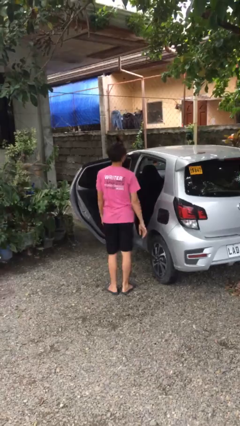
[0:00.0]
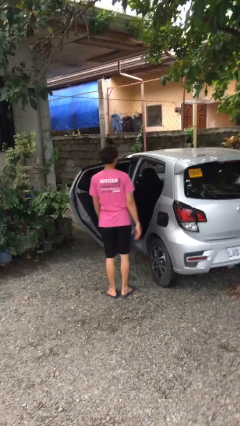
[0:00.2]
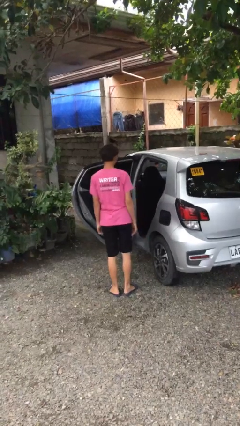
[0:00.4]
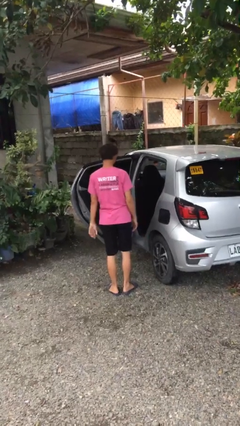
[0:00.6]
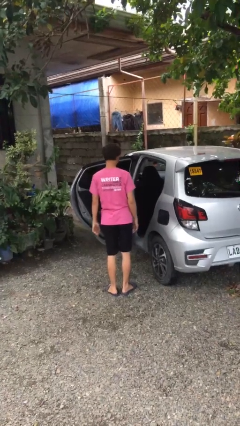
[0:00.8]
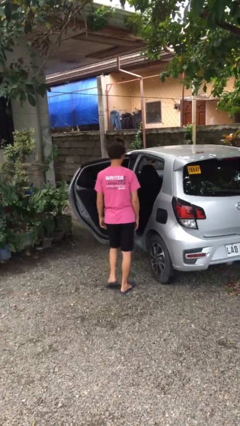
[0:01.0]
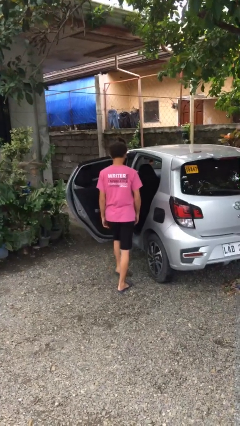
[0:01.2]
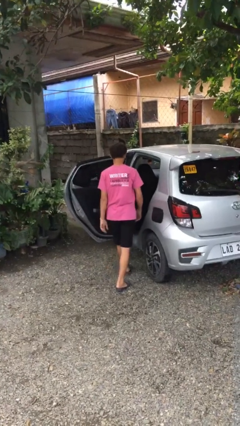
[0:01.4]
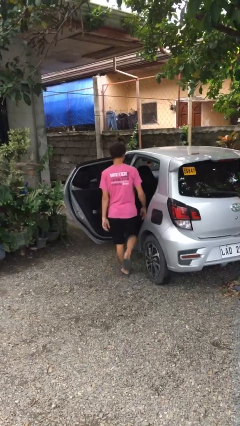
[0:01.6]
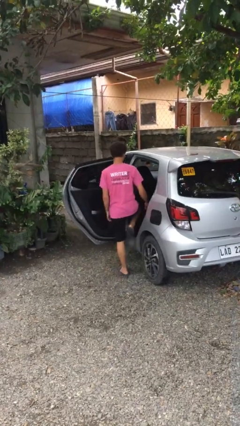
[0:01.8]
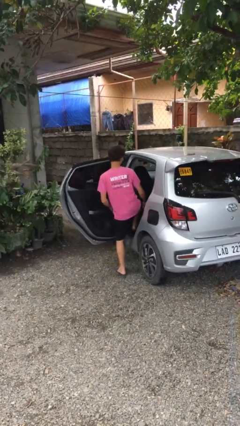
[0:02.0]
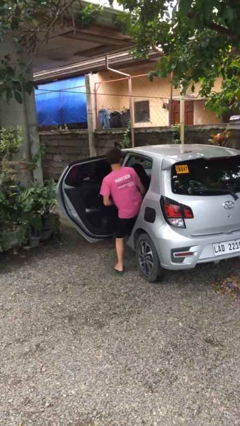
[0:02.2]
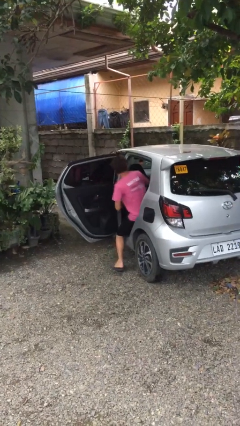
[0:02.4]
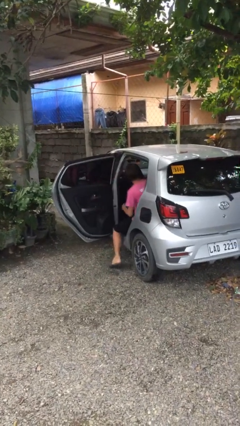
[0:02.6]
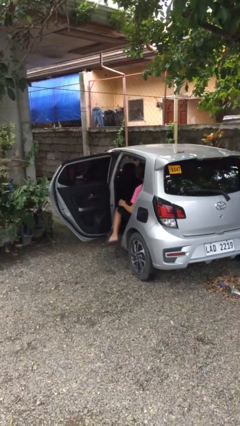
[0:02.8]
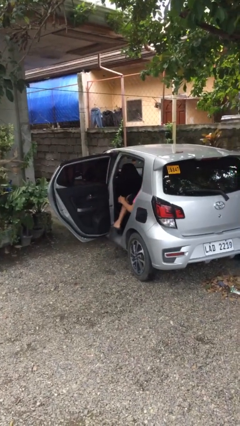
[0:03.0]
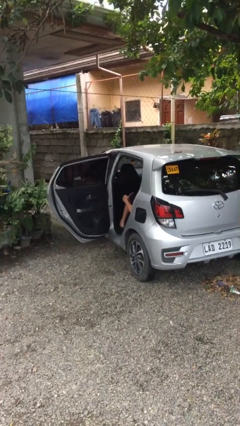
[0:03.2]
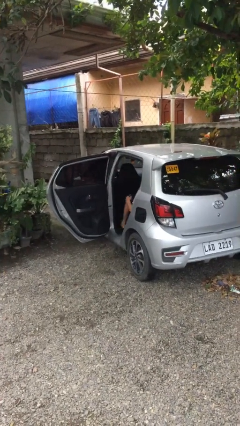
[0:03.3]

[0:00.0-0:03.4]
person enters car

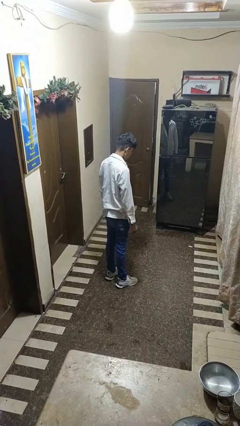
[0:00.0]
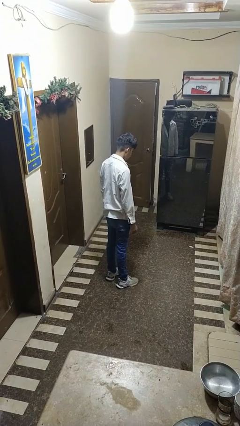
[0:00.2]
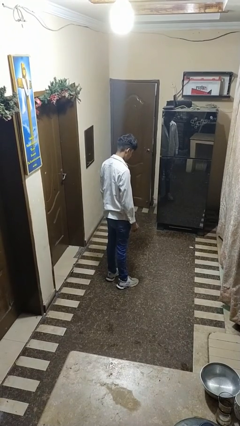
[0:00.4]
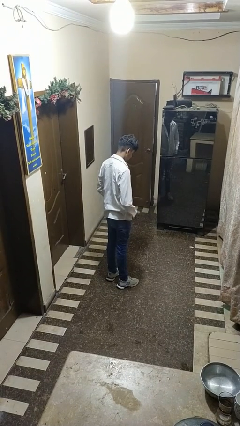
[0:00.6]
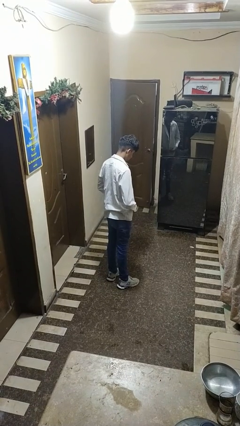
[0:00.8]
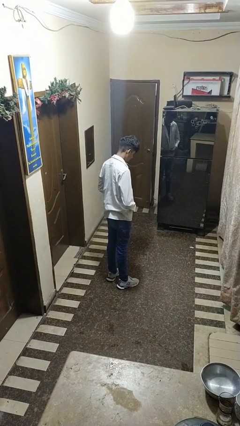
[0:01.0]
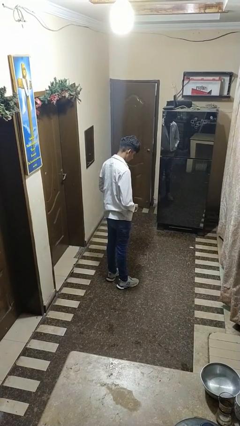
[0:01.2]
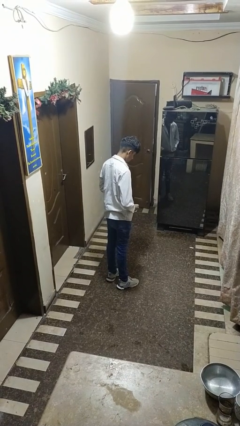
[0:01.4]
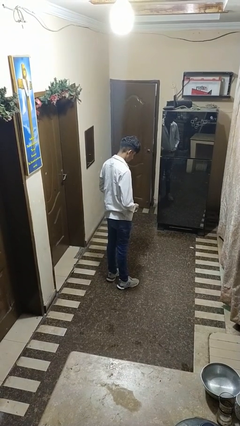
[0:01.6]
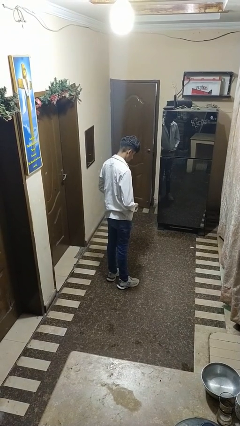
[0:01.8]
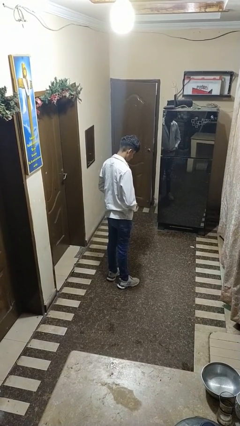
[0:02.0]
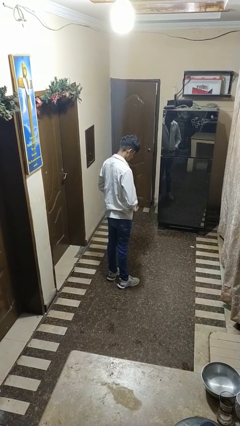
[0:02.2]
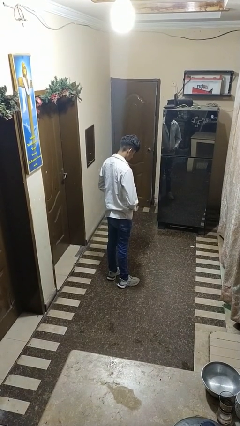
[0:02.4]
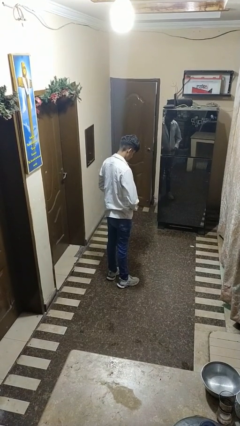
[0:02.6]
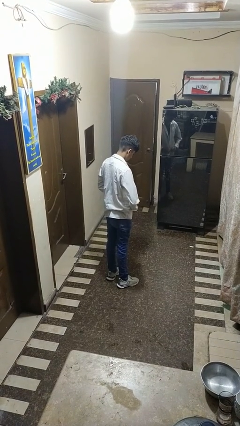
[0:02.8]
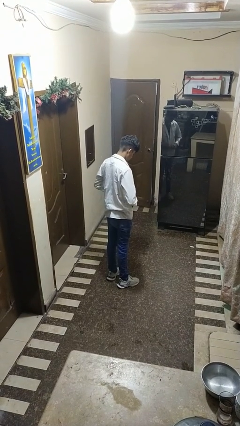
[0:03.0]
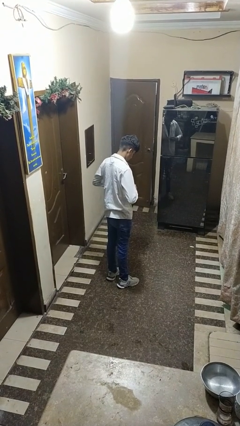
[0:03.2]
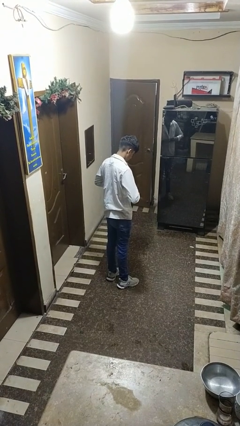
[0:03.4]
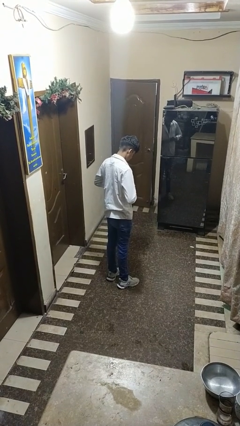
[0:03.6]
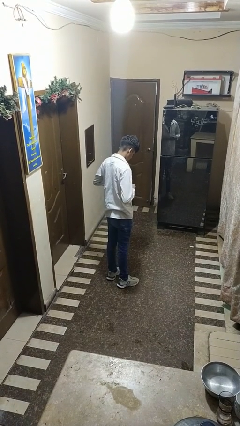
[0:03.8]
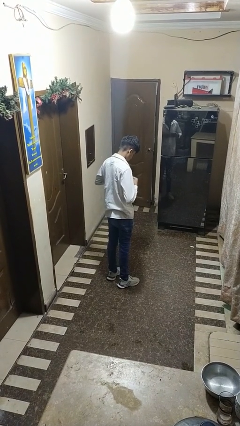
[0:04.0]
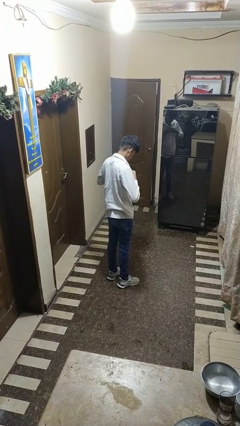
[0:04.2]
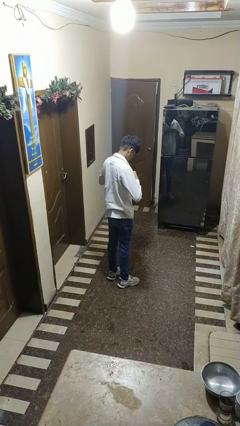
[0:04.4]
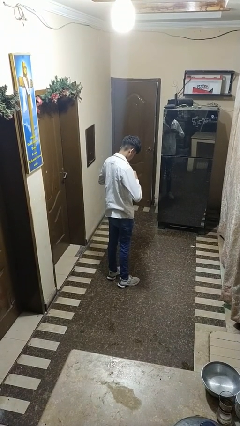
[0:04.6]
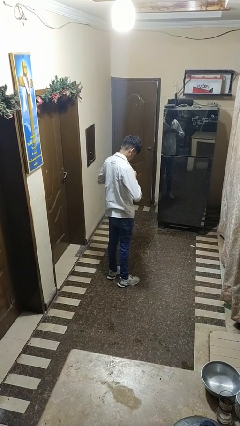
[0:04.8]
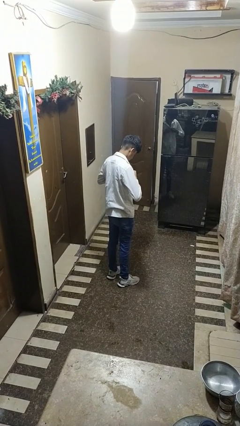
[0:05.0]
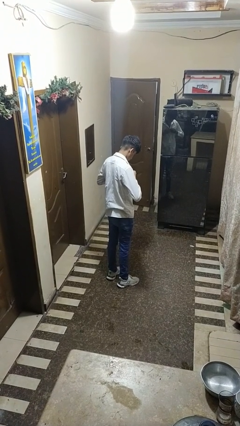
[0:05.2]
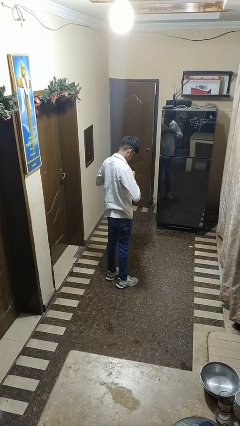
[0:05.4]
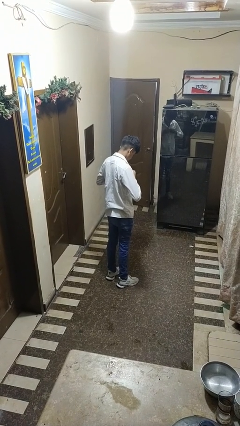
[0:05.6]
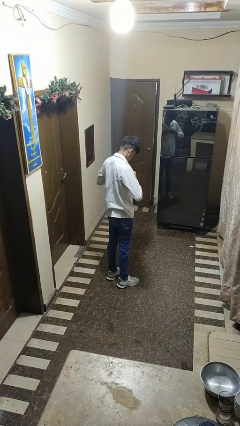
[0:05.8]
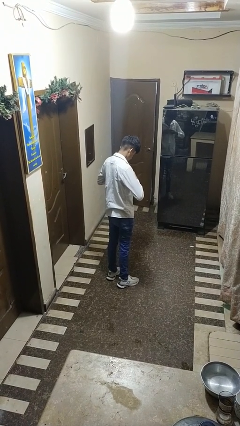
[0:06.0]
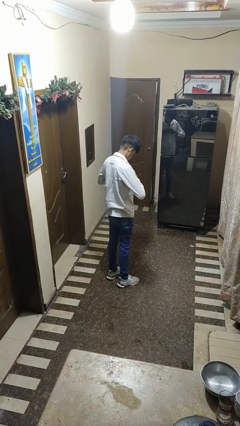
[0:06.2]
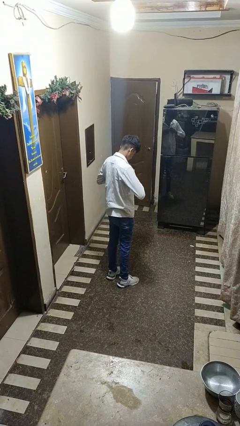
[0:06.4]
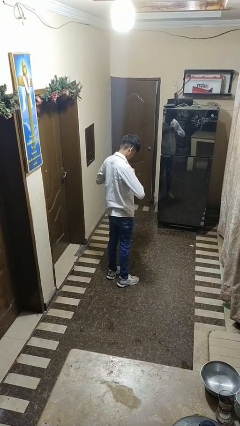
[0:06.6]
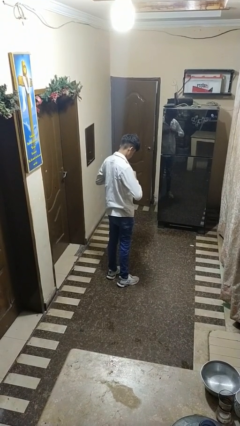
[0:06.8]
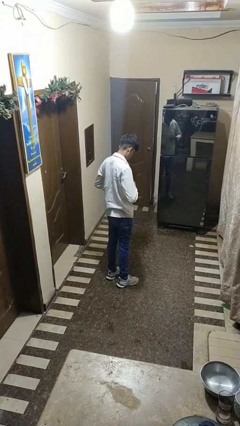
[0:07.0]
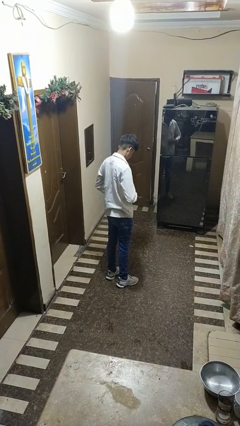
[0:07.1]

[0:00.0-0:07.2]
person buttons shirt

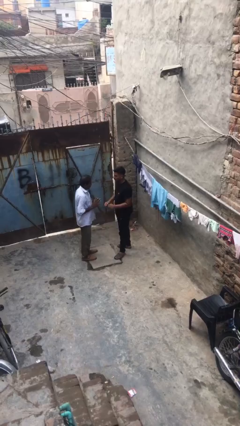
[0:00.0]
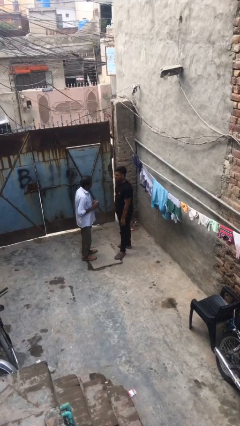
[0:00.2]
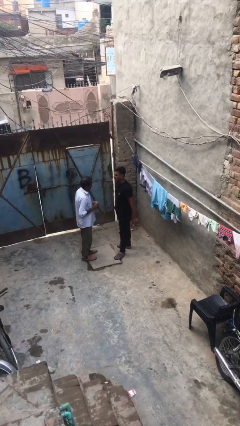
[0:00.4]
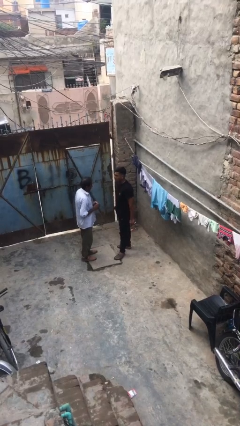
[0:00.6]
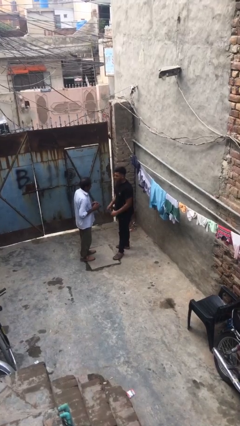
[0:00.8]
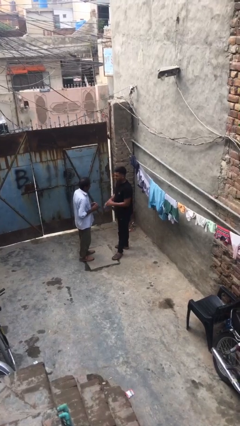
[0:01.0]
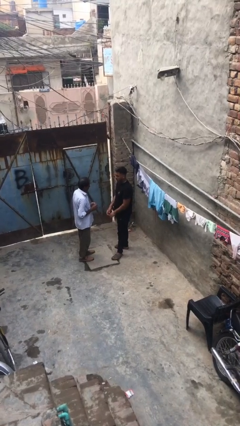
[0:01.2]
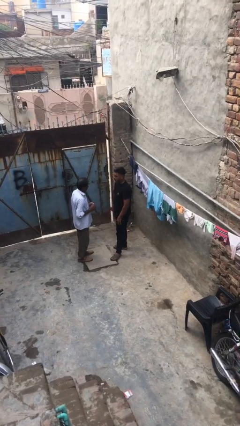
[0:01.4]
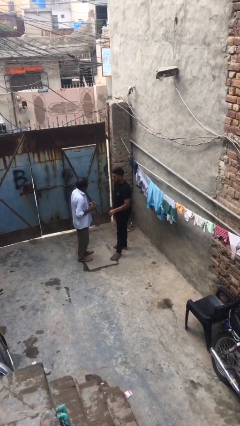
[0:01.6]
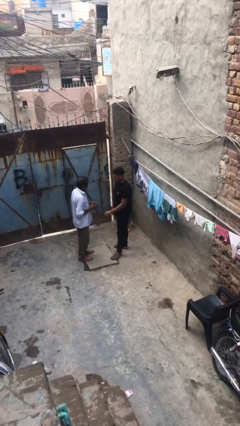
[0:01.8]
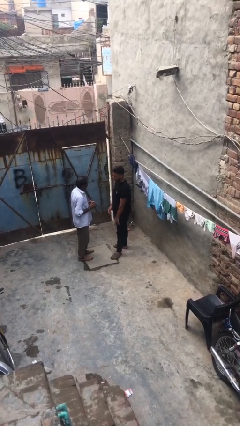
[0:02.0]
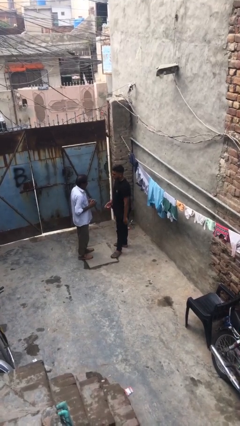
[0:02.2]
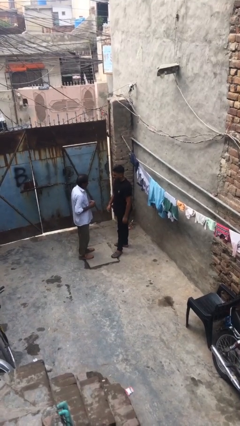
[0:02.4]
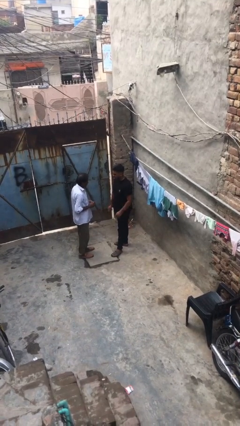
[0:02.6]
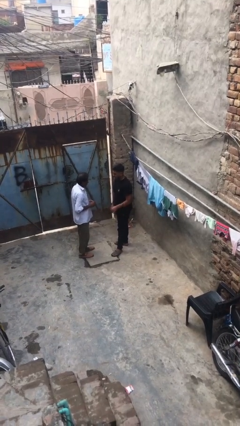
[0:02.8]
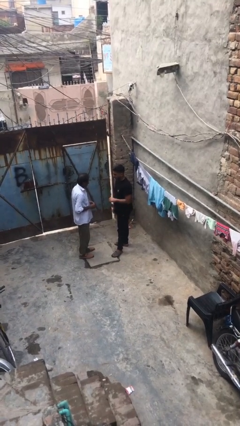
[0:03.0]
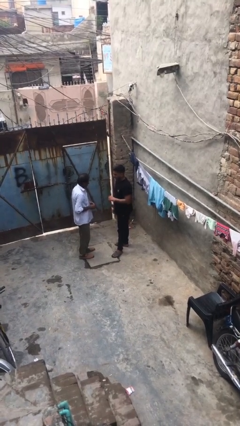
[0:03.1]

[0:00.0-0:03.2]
person talks to person

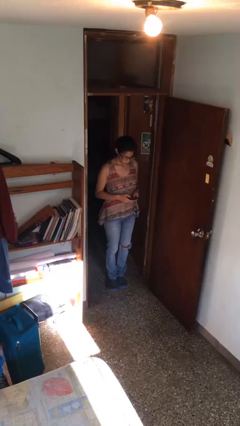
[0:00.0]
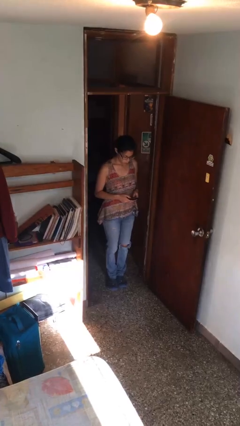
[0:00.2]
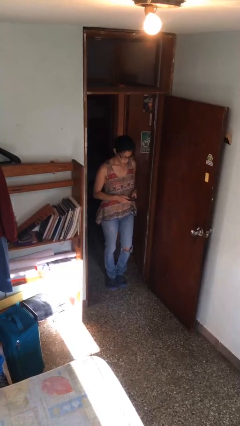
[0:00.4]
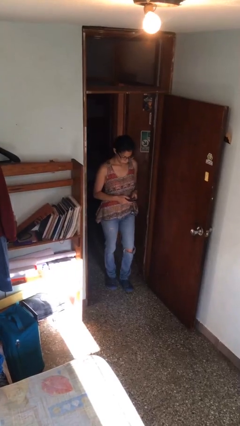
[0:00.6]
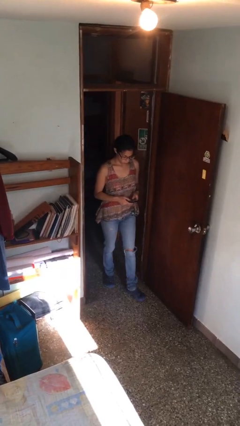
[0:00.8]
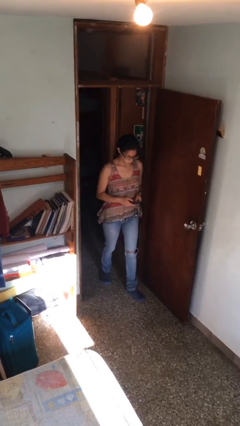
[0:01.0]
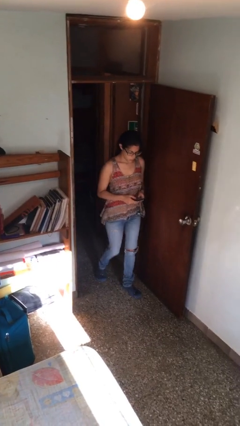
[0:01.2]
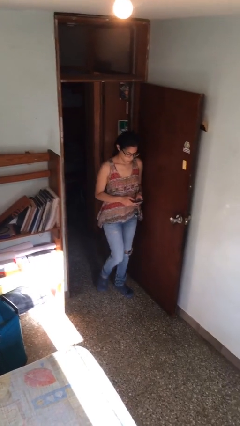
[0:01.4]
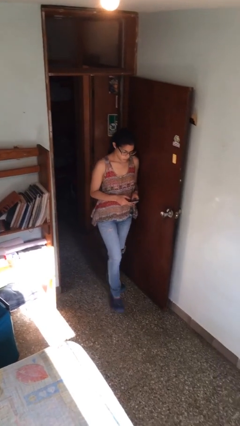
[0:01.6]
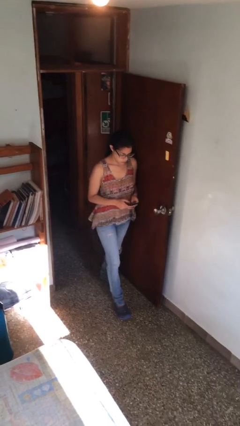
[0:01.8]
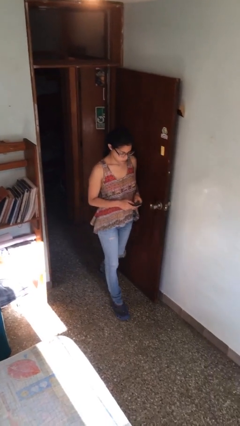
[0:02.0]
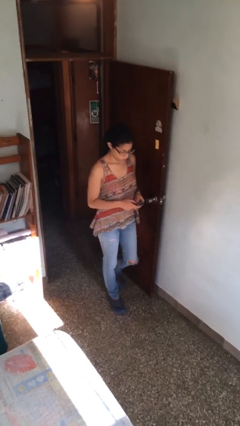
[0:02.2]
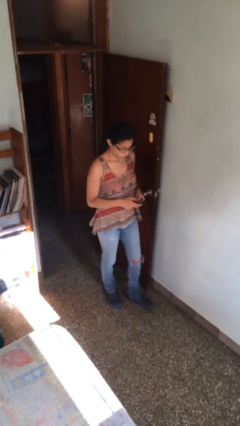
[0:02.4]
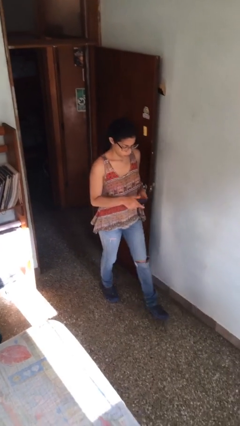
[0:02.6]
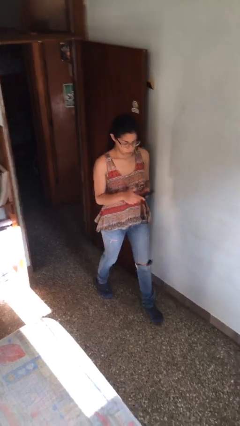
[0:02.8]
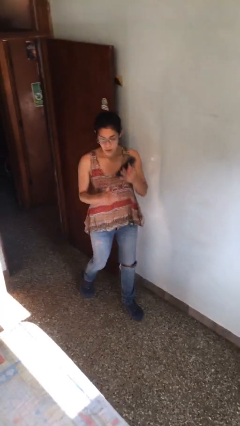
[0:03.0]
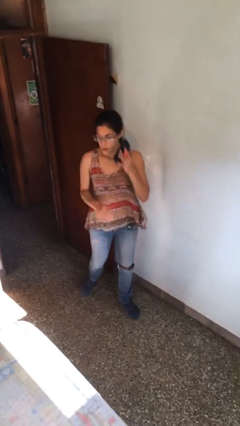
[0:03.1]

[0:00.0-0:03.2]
person texts on phone

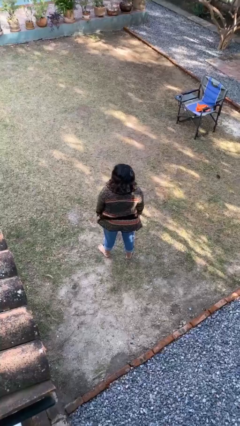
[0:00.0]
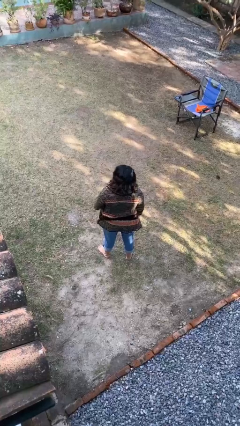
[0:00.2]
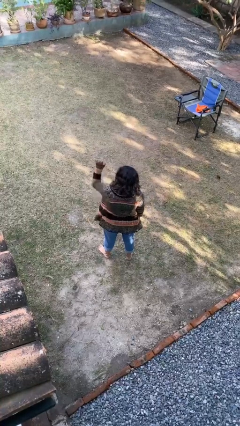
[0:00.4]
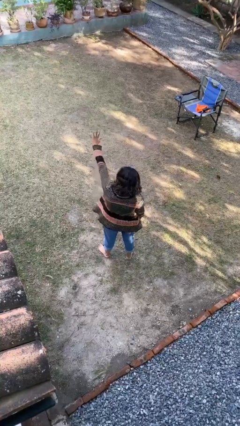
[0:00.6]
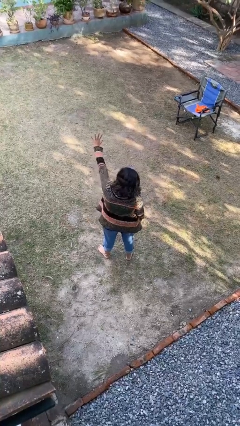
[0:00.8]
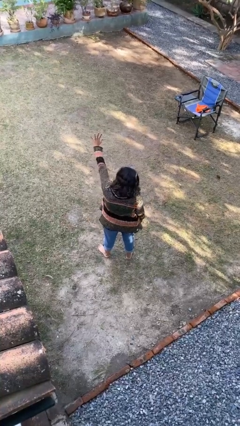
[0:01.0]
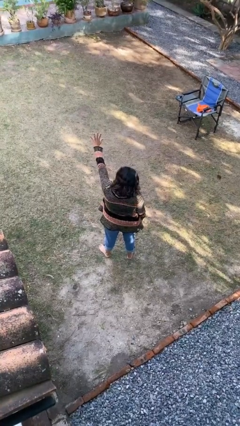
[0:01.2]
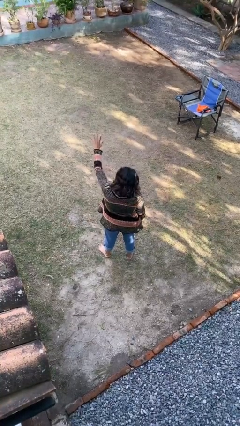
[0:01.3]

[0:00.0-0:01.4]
person gestures number five
